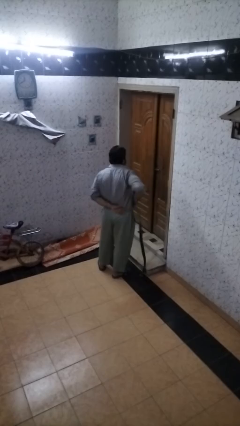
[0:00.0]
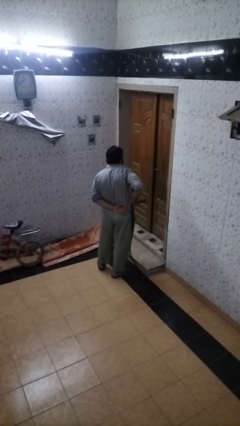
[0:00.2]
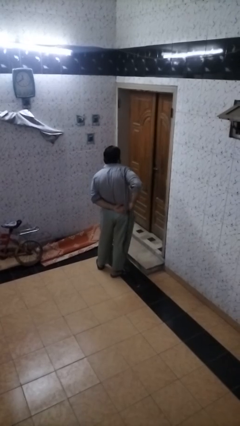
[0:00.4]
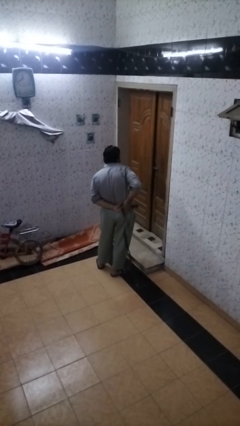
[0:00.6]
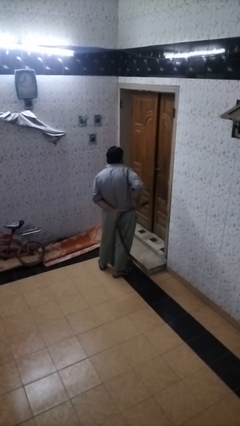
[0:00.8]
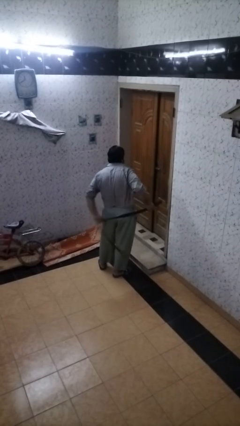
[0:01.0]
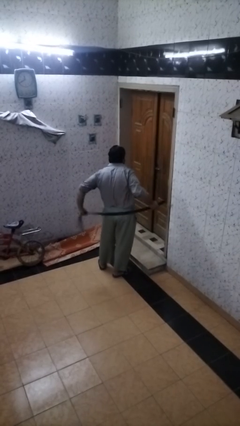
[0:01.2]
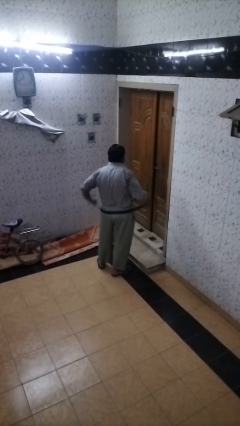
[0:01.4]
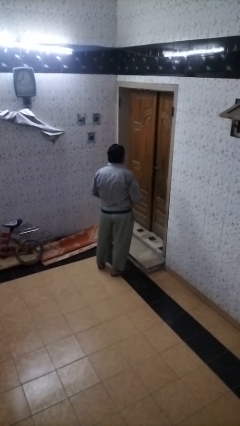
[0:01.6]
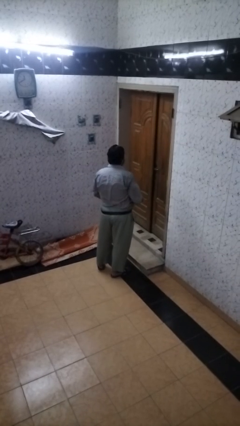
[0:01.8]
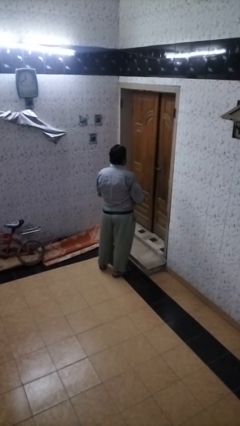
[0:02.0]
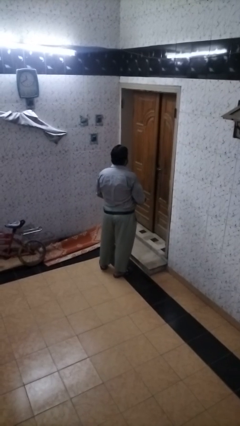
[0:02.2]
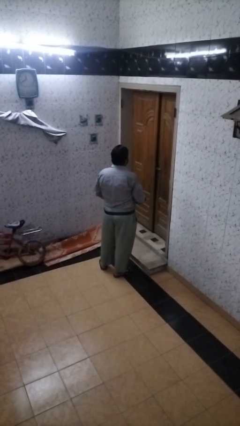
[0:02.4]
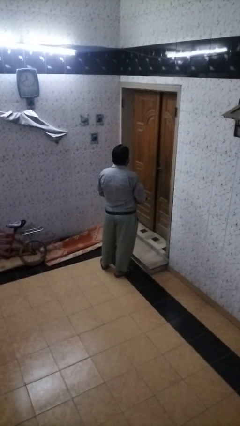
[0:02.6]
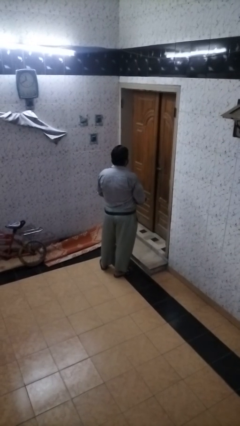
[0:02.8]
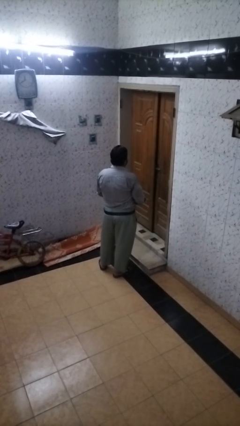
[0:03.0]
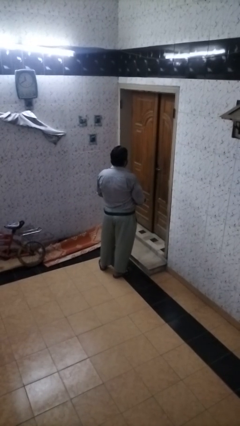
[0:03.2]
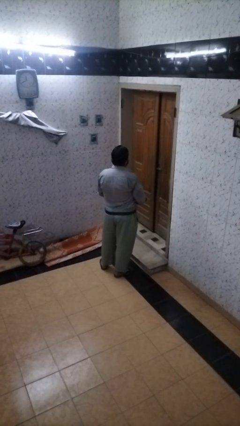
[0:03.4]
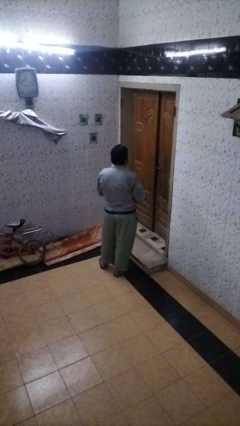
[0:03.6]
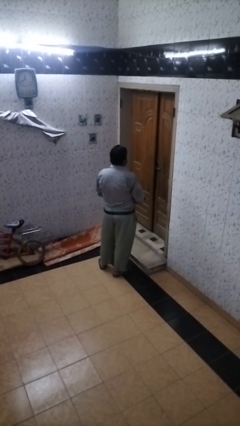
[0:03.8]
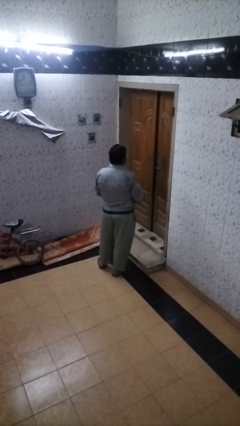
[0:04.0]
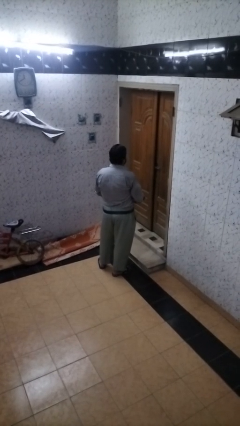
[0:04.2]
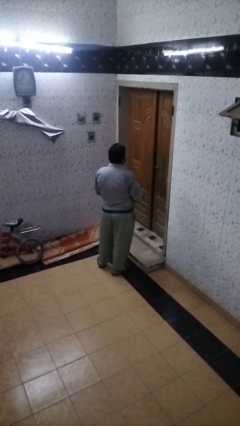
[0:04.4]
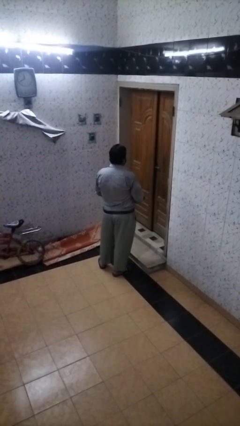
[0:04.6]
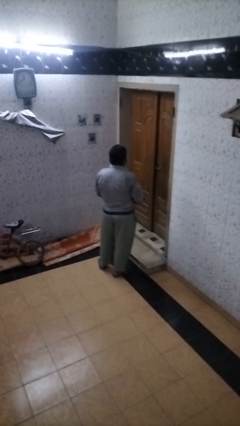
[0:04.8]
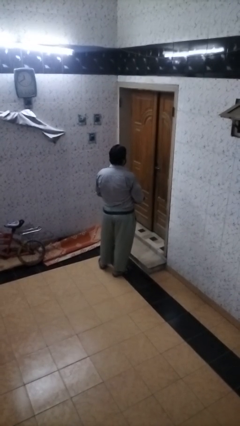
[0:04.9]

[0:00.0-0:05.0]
person puts on belt

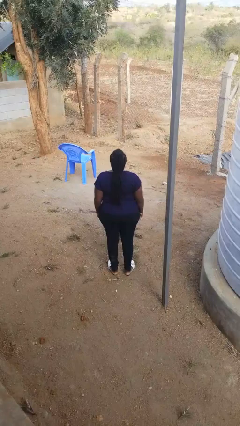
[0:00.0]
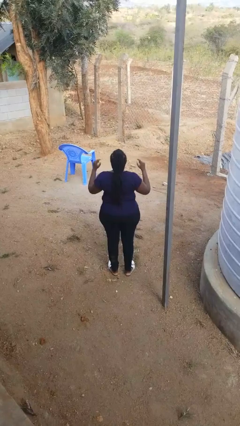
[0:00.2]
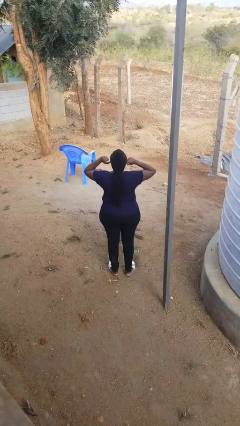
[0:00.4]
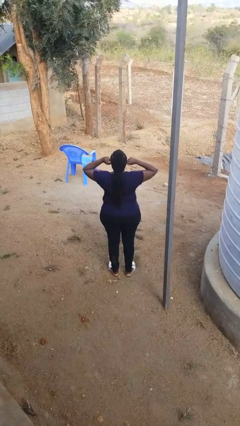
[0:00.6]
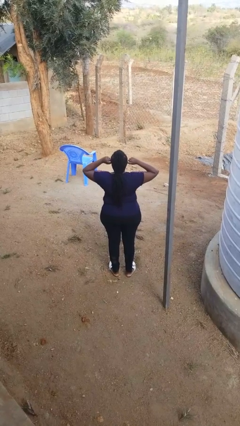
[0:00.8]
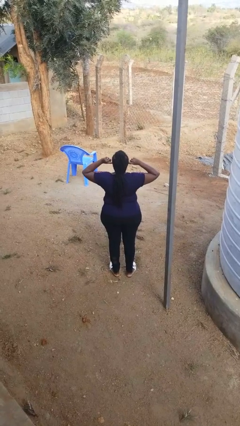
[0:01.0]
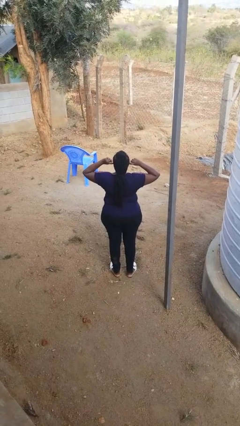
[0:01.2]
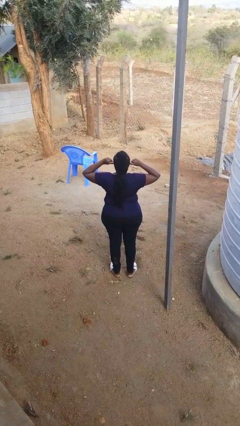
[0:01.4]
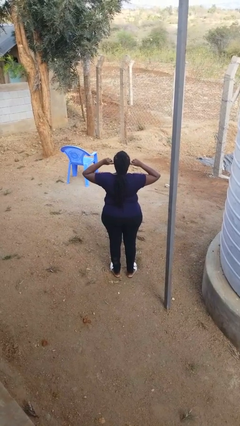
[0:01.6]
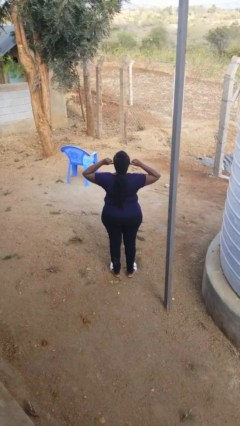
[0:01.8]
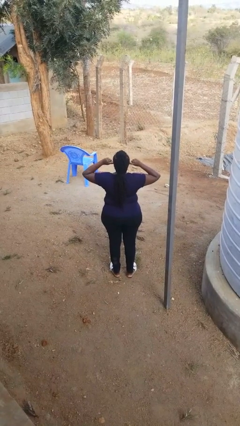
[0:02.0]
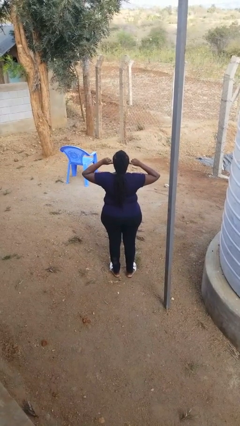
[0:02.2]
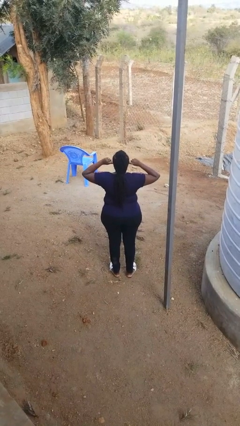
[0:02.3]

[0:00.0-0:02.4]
person puts fingers in ear

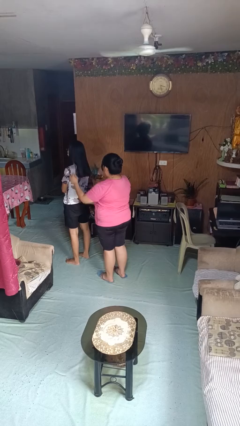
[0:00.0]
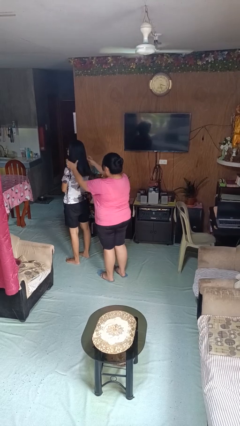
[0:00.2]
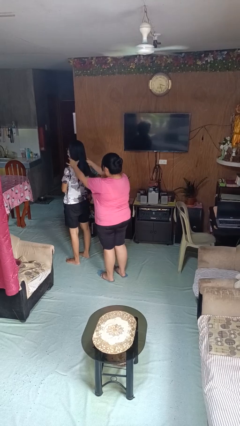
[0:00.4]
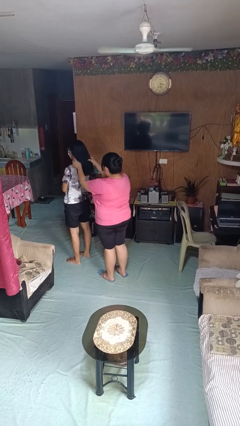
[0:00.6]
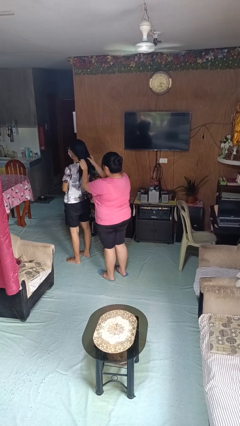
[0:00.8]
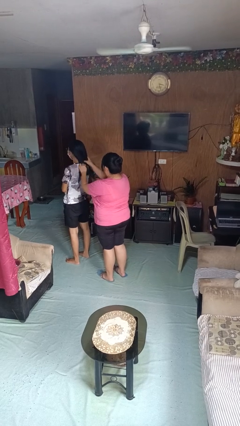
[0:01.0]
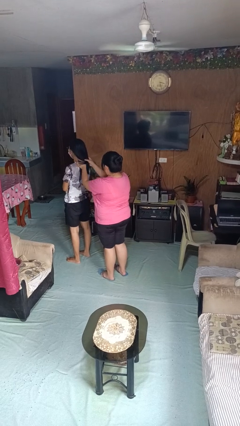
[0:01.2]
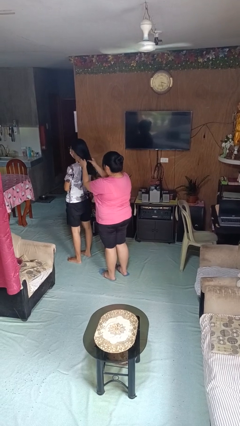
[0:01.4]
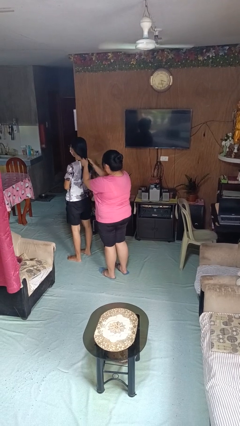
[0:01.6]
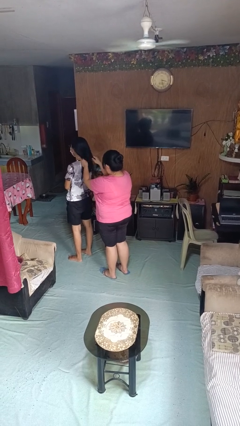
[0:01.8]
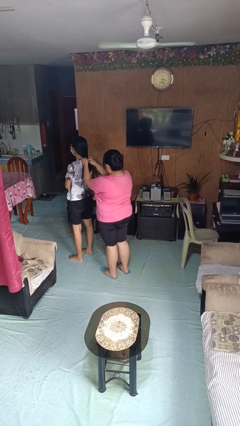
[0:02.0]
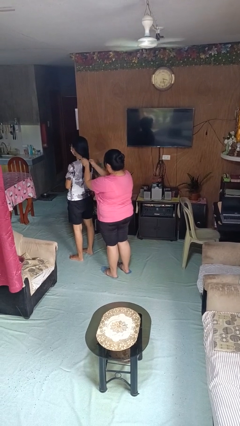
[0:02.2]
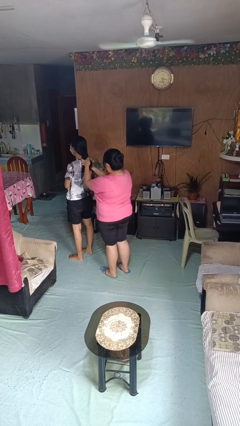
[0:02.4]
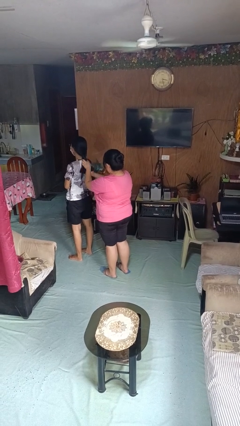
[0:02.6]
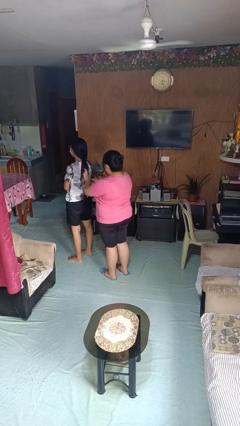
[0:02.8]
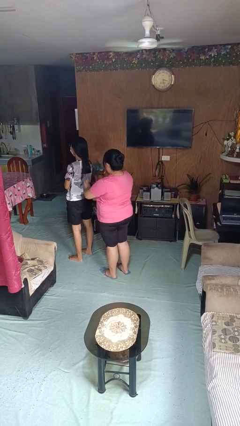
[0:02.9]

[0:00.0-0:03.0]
person braids hair of person

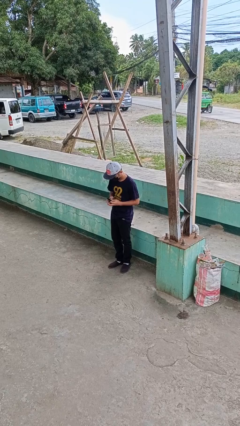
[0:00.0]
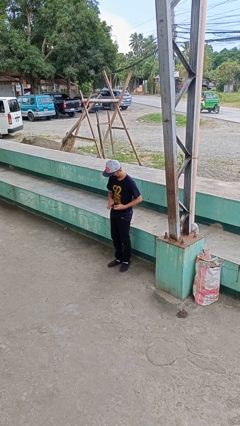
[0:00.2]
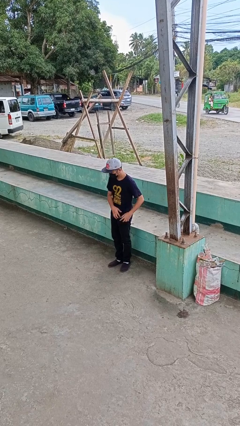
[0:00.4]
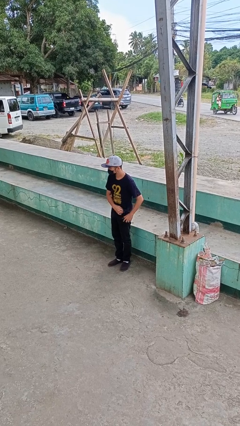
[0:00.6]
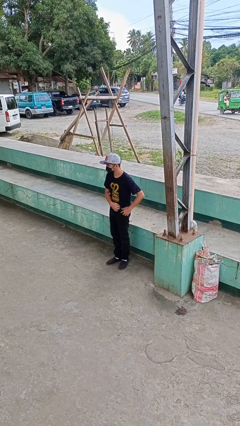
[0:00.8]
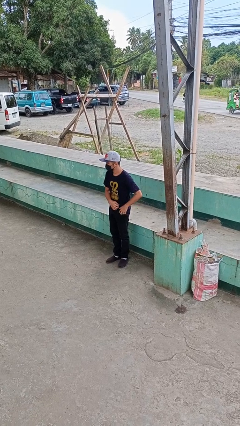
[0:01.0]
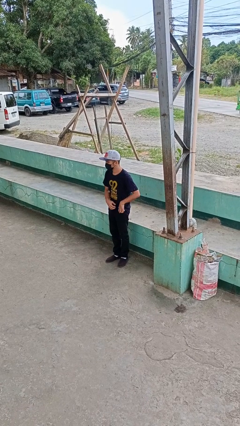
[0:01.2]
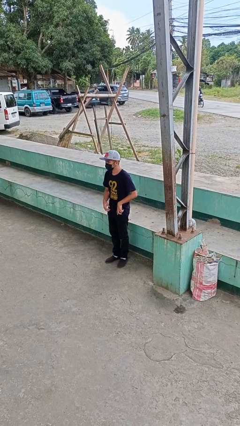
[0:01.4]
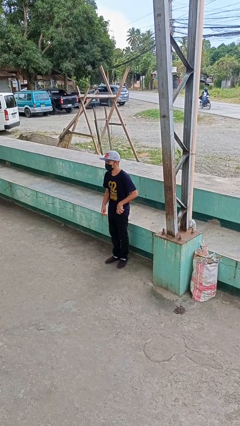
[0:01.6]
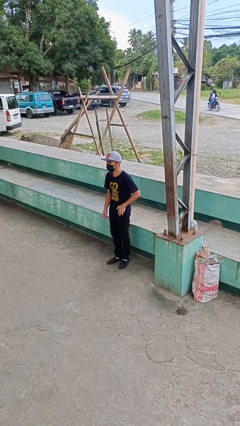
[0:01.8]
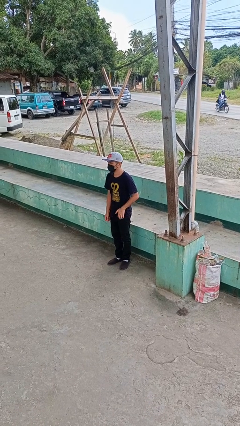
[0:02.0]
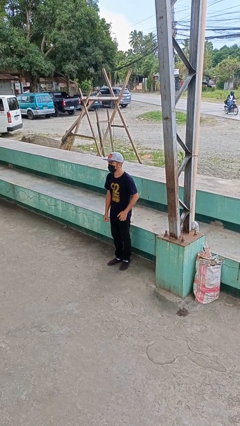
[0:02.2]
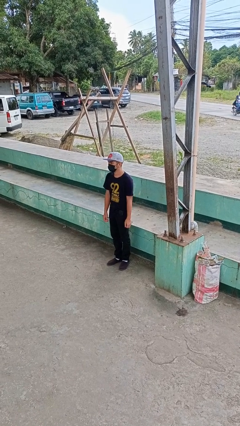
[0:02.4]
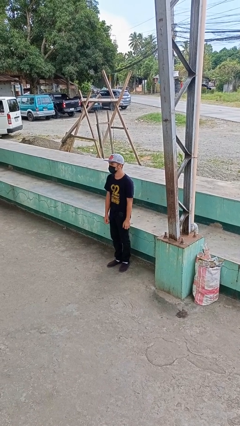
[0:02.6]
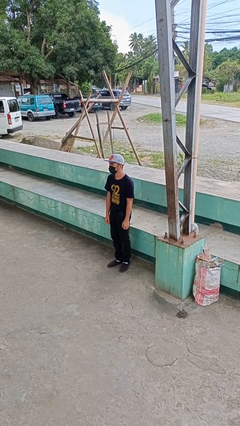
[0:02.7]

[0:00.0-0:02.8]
person puts phone into pocket

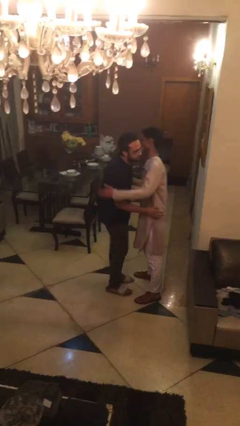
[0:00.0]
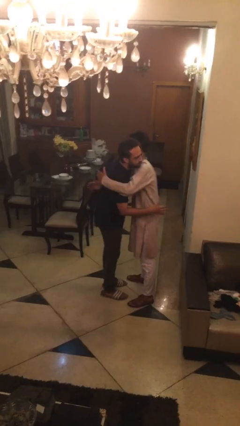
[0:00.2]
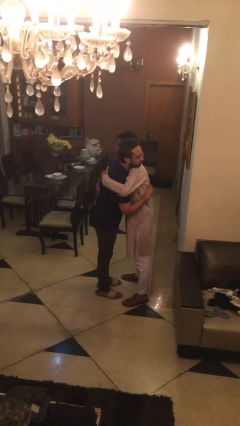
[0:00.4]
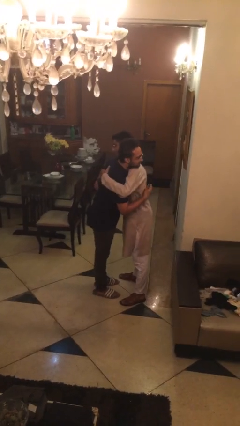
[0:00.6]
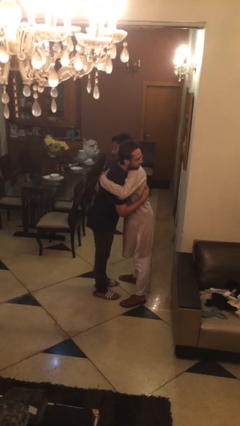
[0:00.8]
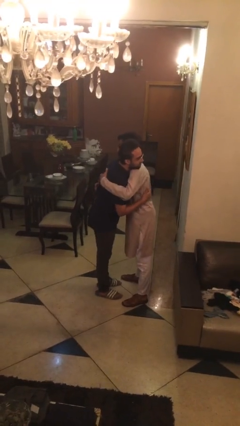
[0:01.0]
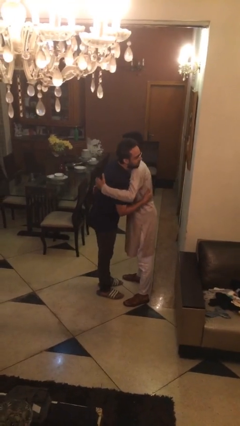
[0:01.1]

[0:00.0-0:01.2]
person embraces person

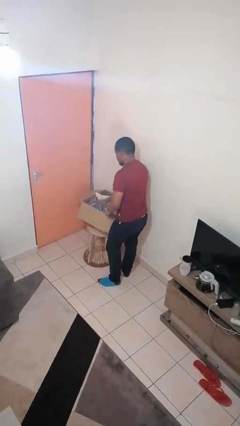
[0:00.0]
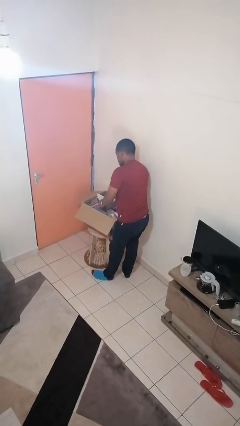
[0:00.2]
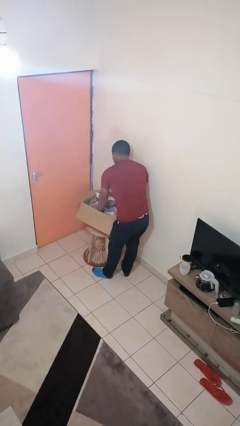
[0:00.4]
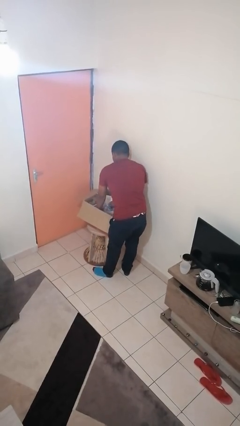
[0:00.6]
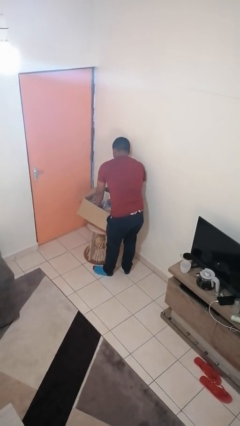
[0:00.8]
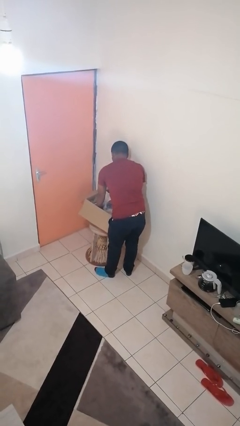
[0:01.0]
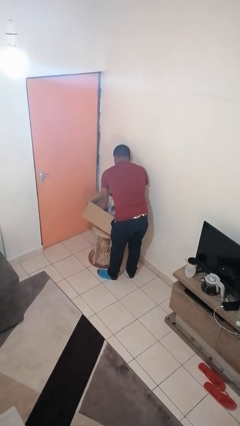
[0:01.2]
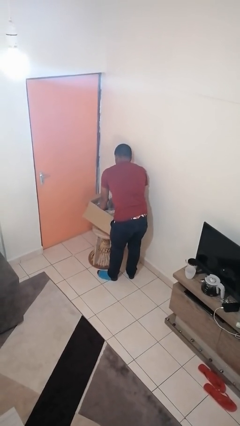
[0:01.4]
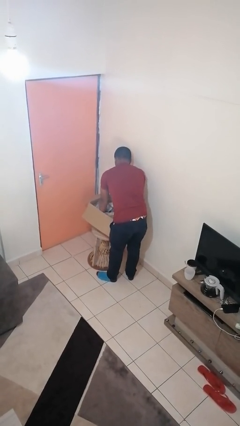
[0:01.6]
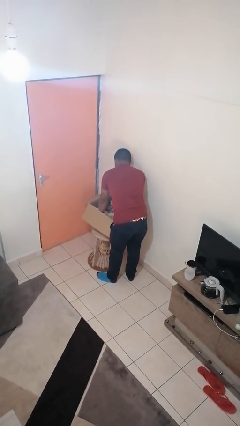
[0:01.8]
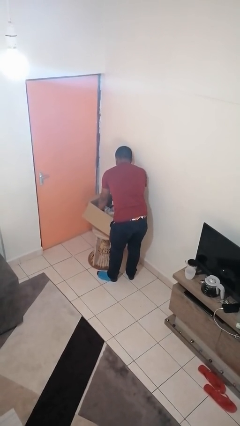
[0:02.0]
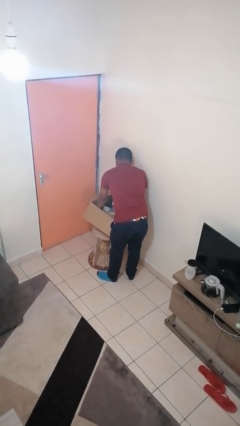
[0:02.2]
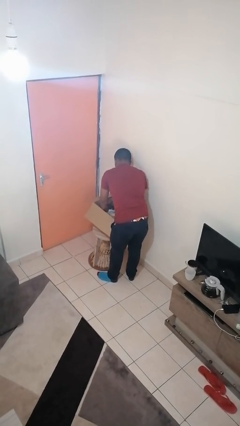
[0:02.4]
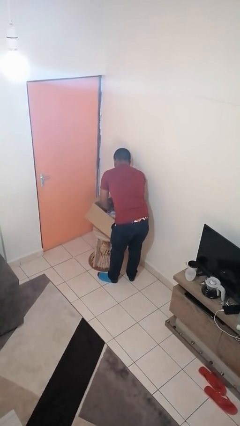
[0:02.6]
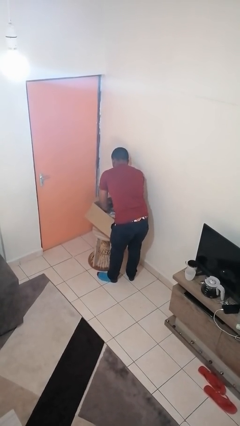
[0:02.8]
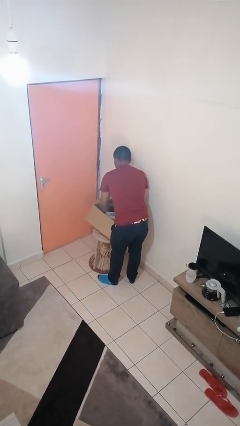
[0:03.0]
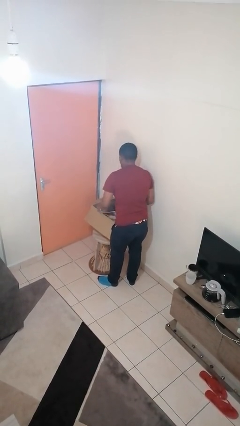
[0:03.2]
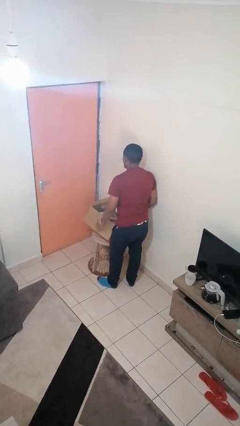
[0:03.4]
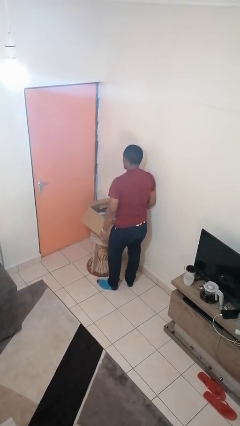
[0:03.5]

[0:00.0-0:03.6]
person searches in box
